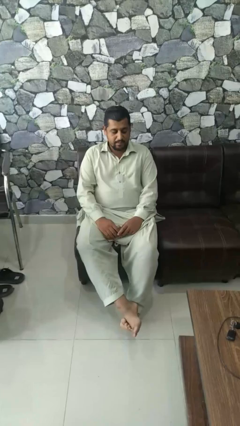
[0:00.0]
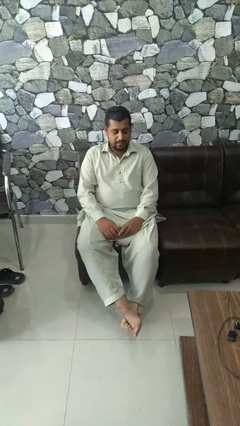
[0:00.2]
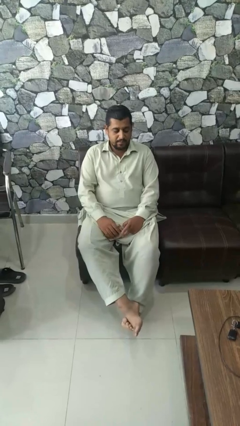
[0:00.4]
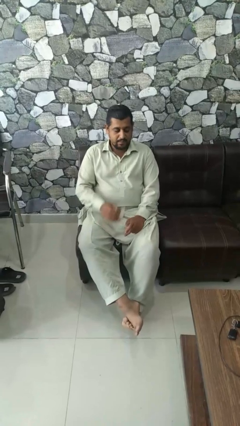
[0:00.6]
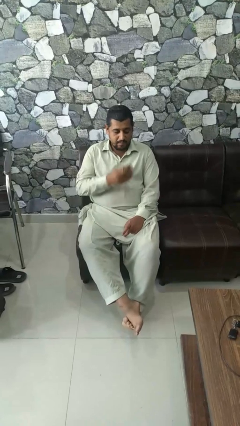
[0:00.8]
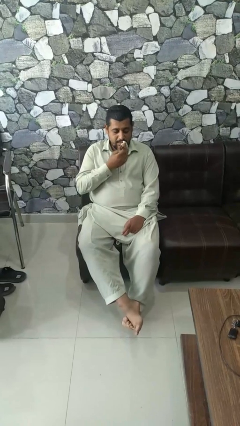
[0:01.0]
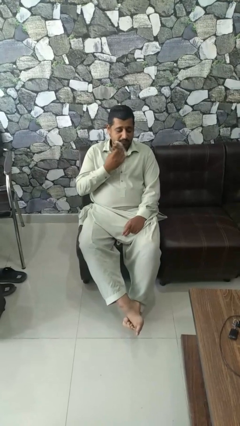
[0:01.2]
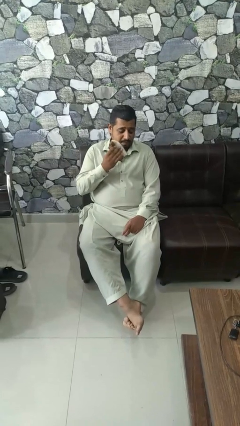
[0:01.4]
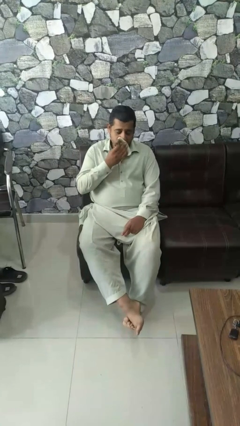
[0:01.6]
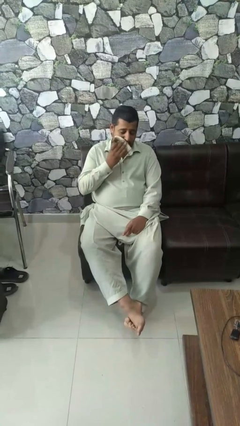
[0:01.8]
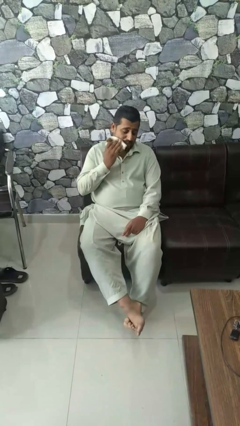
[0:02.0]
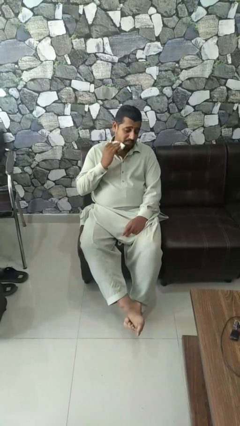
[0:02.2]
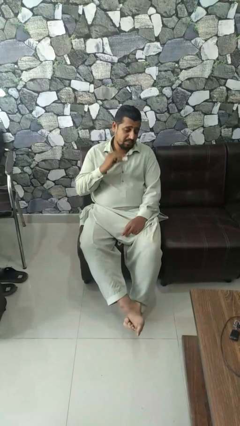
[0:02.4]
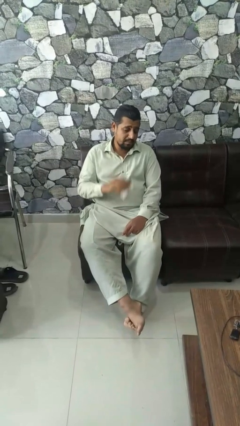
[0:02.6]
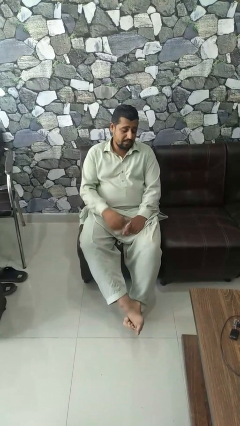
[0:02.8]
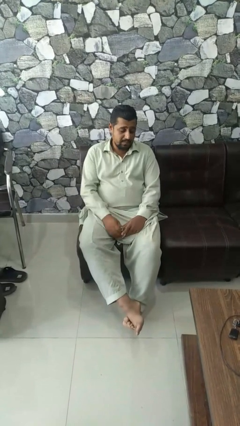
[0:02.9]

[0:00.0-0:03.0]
person wipes mouth with napkin

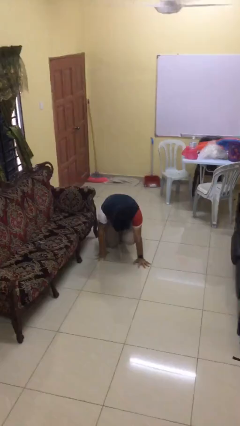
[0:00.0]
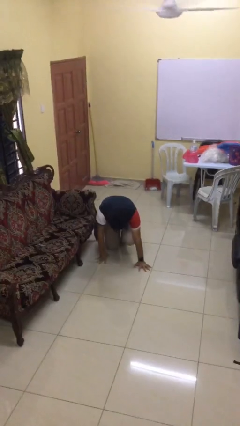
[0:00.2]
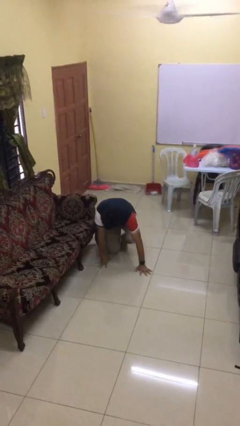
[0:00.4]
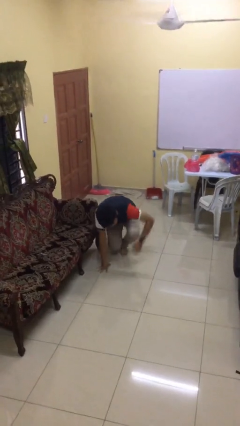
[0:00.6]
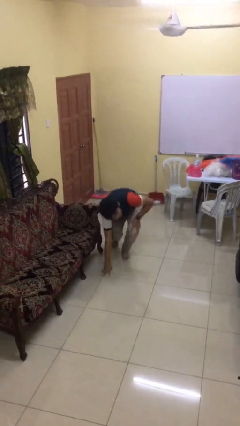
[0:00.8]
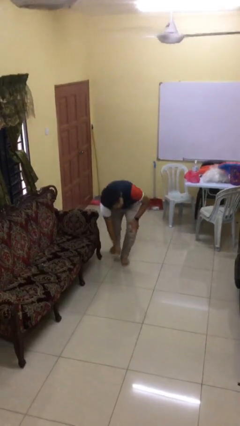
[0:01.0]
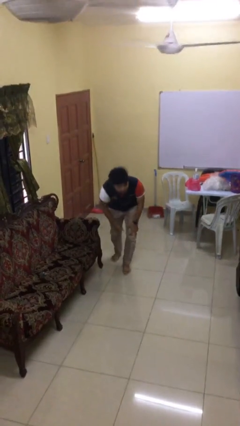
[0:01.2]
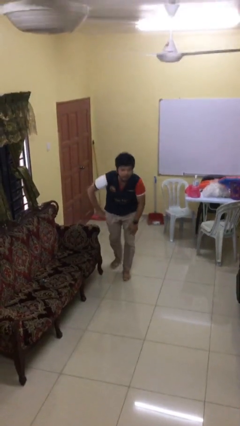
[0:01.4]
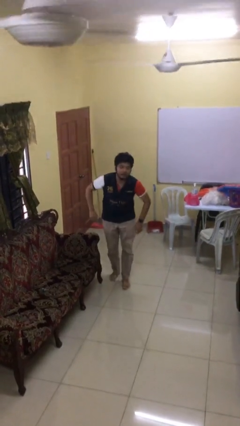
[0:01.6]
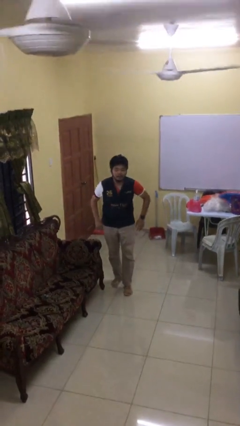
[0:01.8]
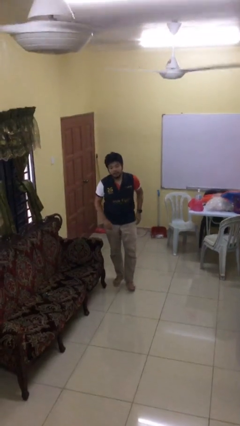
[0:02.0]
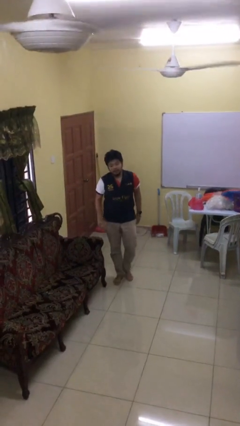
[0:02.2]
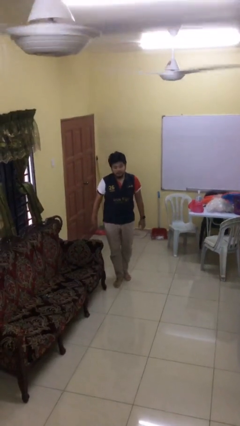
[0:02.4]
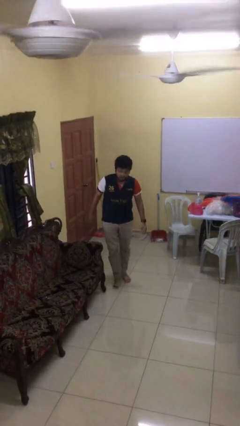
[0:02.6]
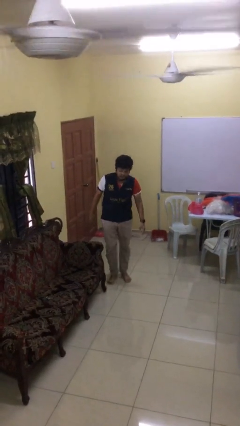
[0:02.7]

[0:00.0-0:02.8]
person stands up from floor

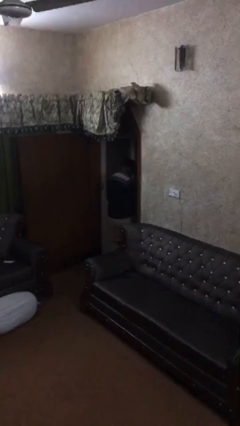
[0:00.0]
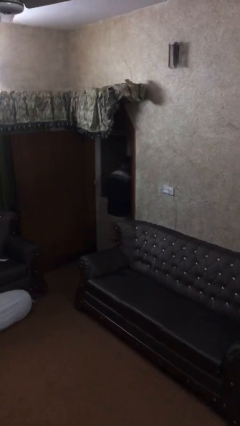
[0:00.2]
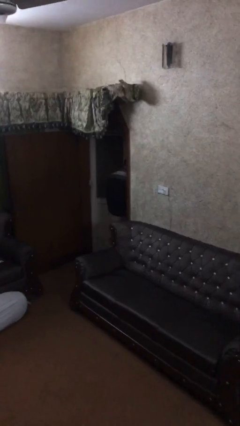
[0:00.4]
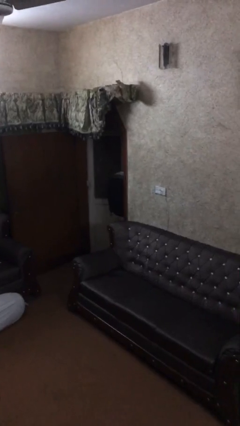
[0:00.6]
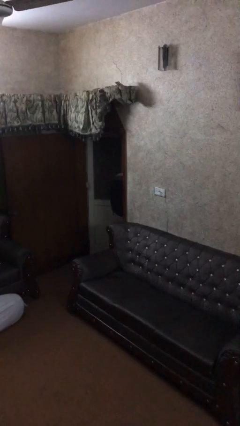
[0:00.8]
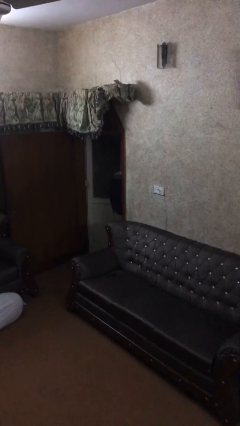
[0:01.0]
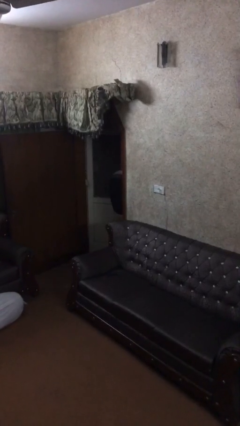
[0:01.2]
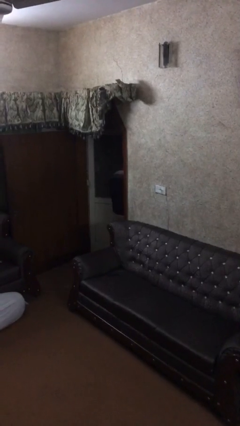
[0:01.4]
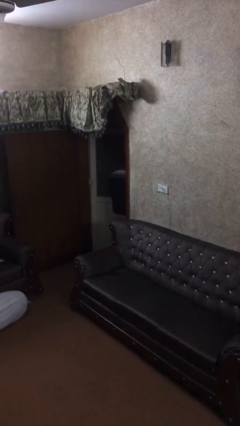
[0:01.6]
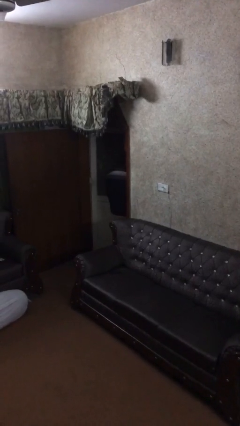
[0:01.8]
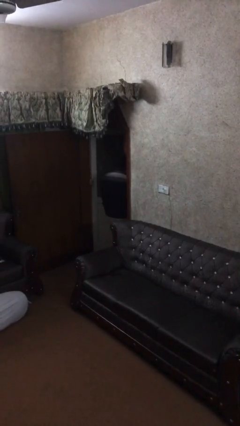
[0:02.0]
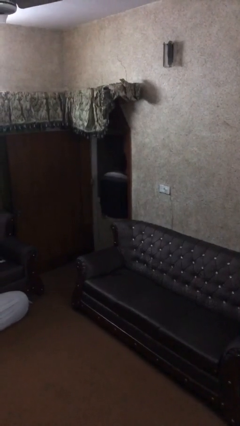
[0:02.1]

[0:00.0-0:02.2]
person opens facility door

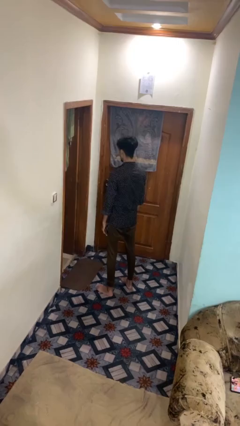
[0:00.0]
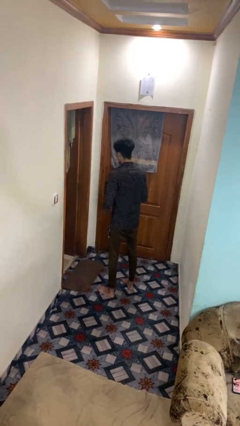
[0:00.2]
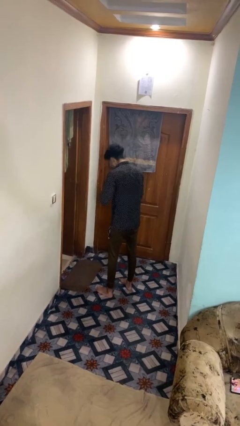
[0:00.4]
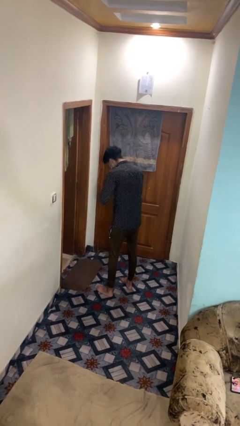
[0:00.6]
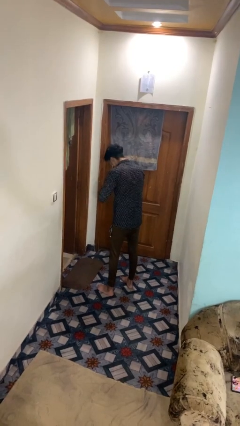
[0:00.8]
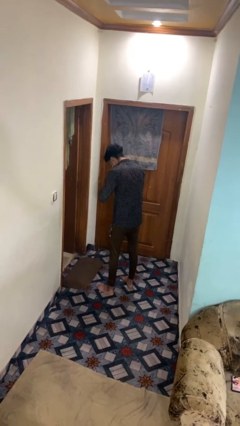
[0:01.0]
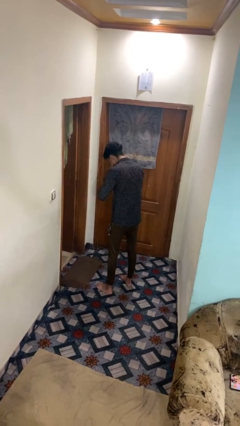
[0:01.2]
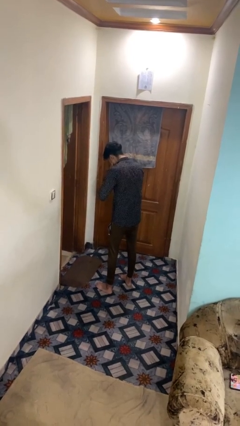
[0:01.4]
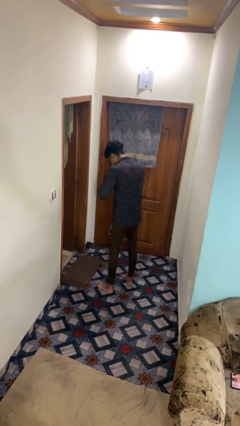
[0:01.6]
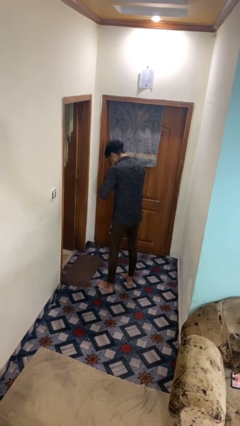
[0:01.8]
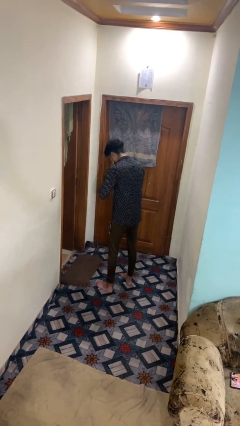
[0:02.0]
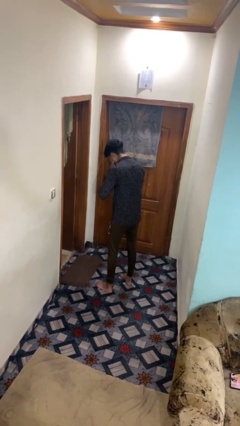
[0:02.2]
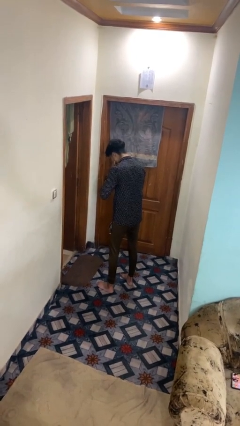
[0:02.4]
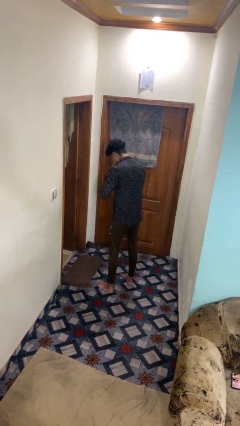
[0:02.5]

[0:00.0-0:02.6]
person sneezes into hand

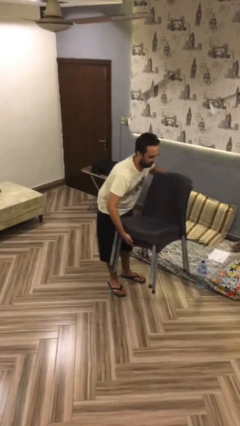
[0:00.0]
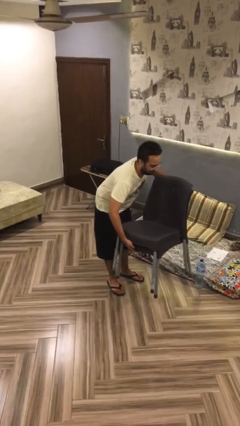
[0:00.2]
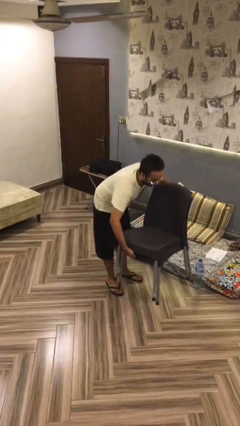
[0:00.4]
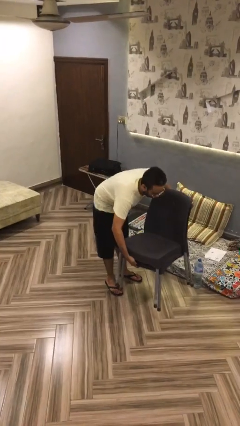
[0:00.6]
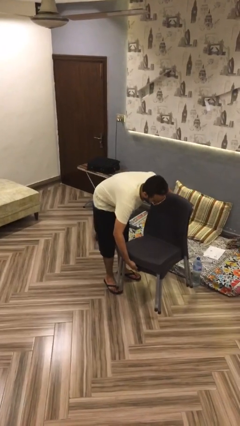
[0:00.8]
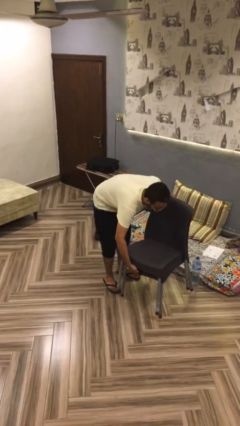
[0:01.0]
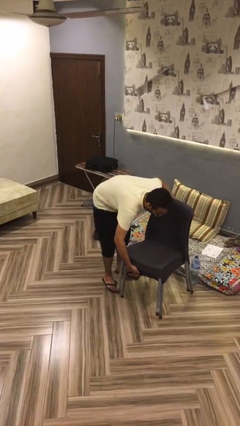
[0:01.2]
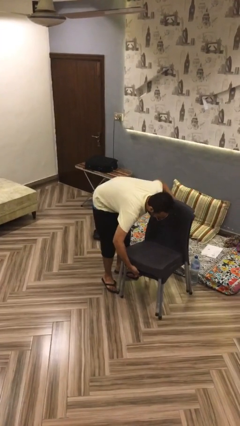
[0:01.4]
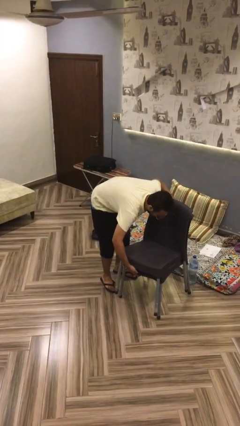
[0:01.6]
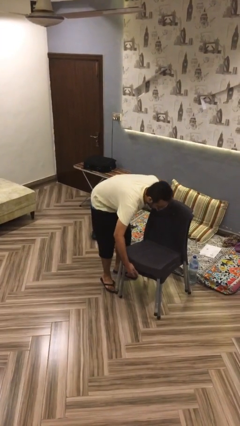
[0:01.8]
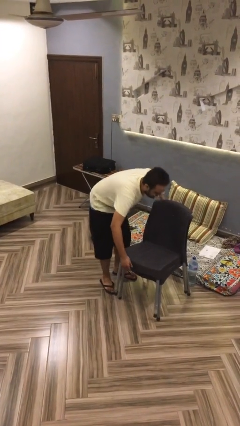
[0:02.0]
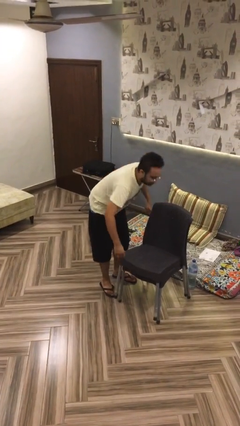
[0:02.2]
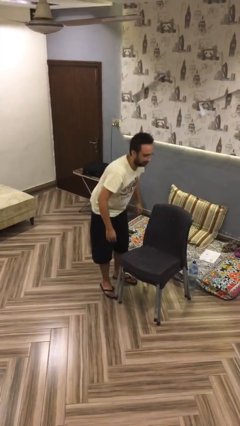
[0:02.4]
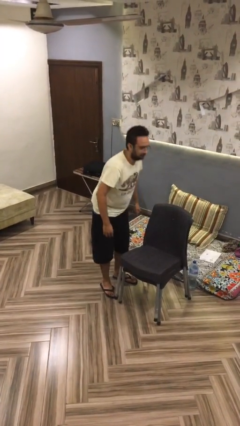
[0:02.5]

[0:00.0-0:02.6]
person puts down object on floor

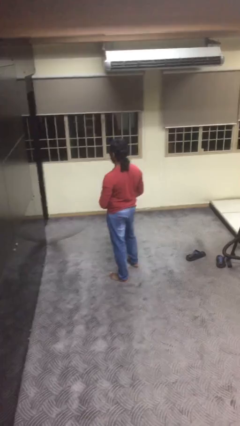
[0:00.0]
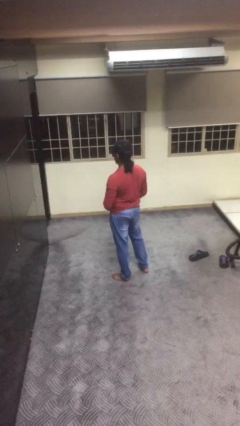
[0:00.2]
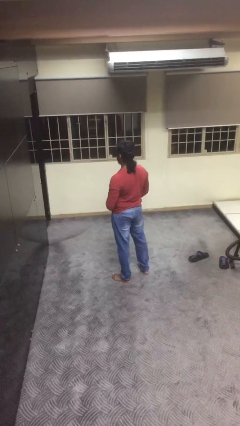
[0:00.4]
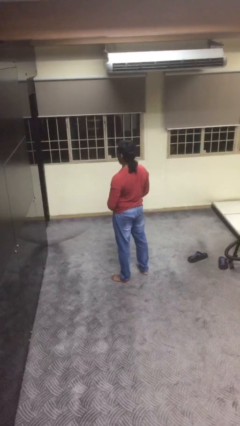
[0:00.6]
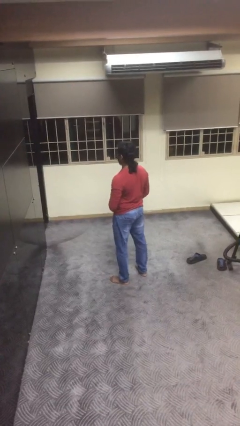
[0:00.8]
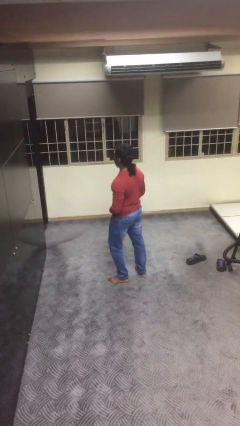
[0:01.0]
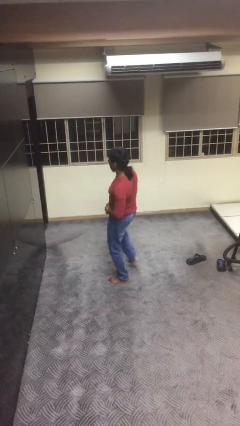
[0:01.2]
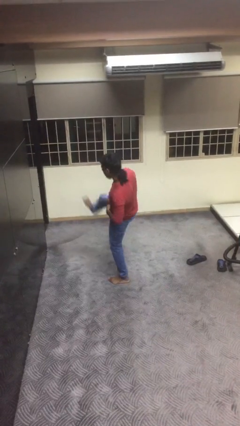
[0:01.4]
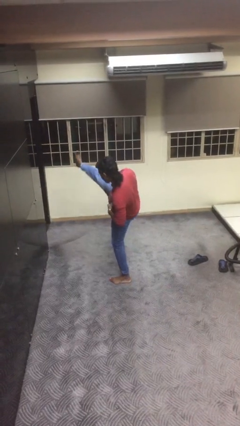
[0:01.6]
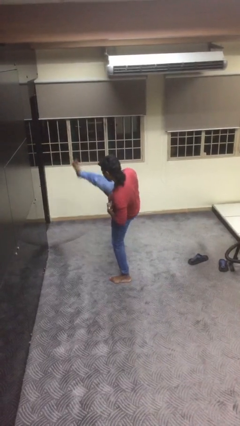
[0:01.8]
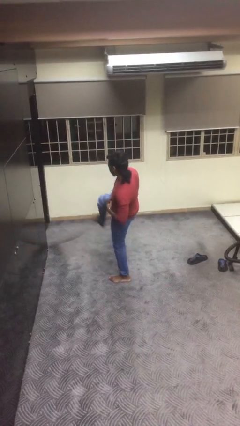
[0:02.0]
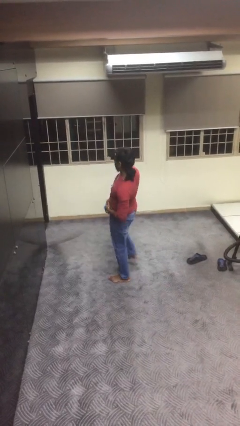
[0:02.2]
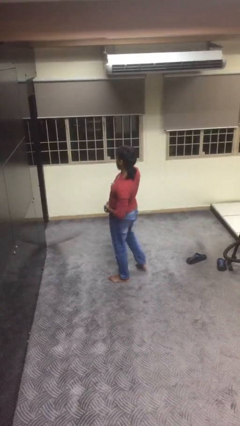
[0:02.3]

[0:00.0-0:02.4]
person karate kicks

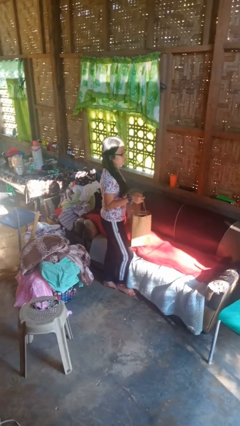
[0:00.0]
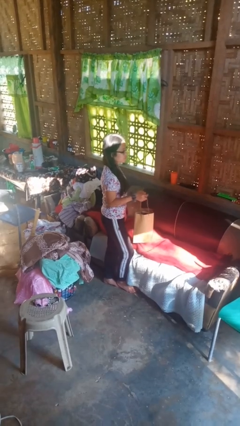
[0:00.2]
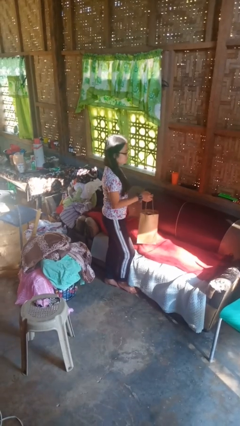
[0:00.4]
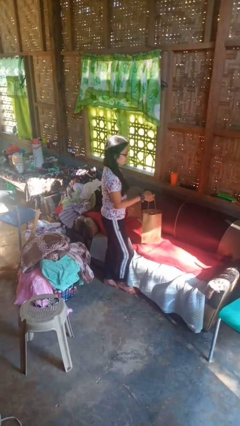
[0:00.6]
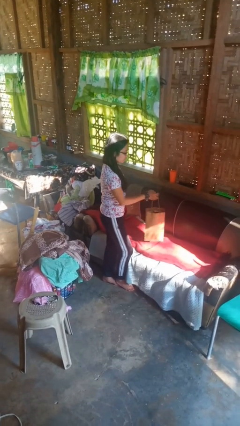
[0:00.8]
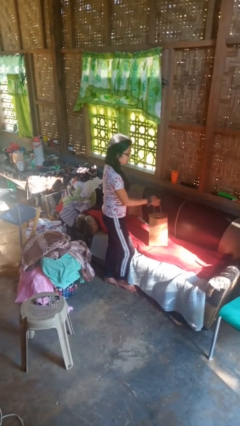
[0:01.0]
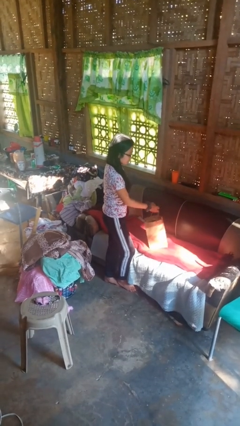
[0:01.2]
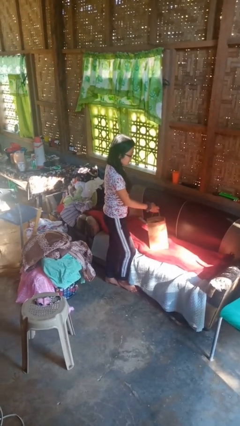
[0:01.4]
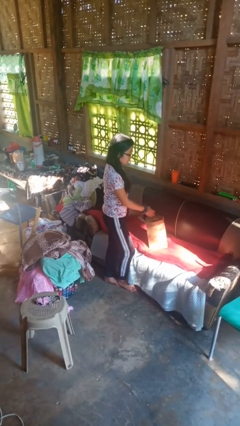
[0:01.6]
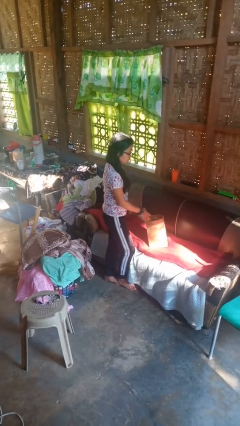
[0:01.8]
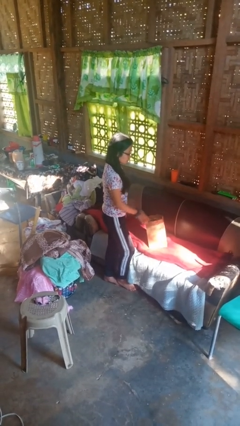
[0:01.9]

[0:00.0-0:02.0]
person puts down object on couch
